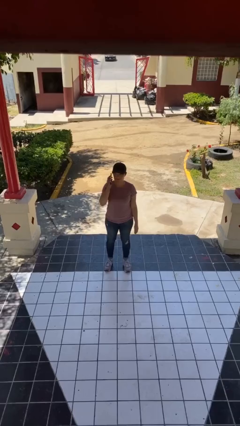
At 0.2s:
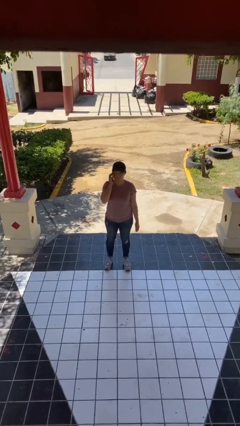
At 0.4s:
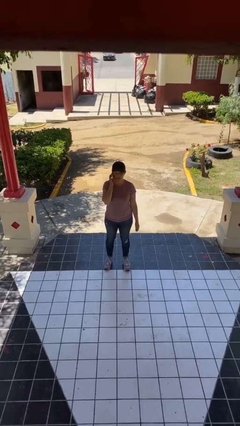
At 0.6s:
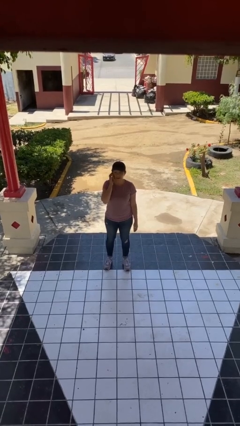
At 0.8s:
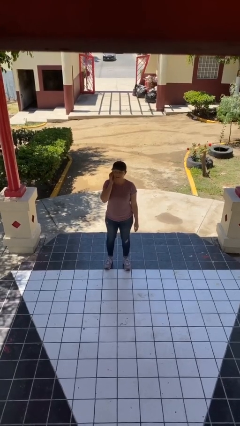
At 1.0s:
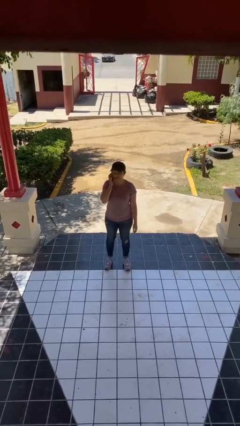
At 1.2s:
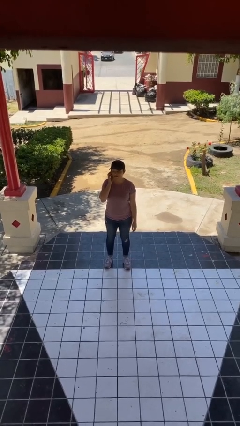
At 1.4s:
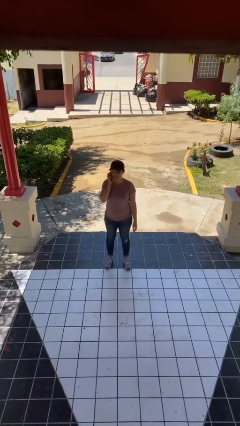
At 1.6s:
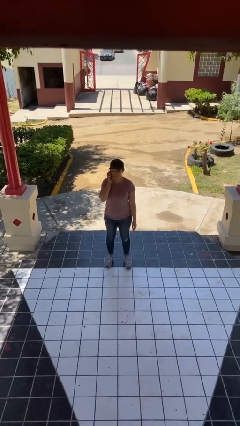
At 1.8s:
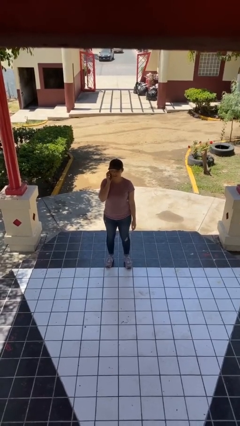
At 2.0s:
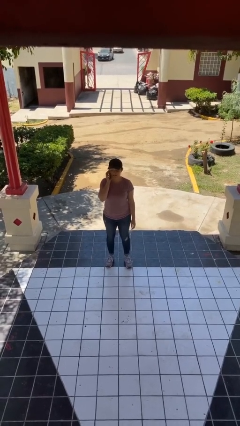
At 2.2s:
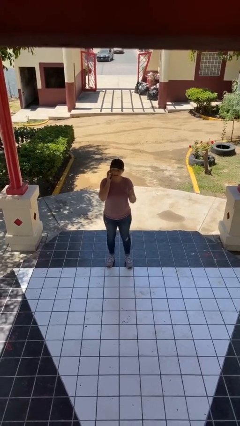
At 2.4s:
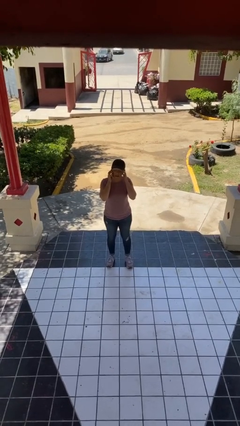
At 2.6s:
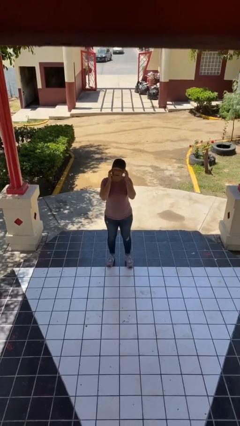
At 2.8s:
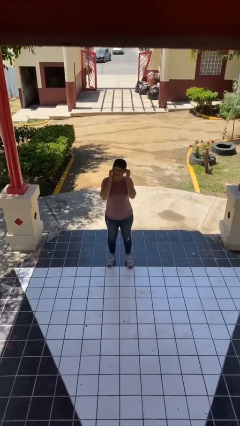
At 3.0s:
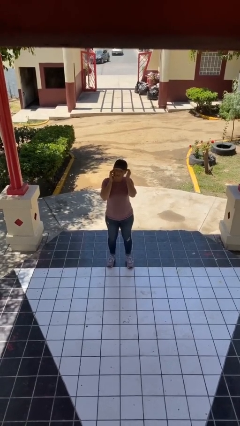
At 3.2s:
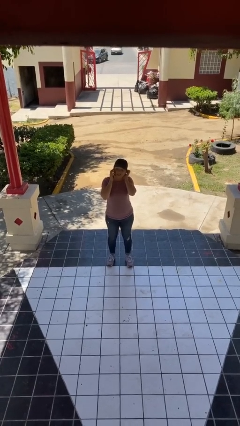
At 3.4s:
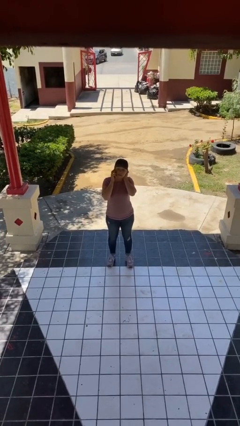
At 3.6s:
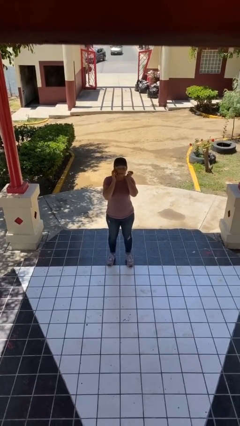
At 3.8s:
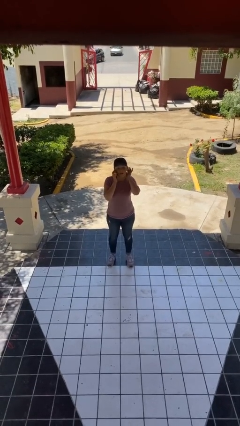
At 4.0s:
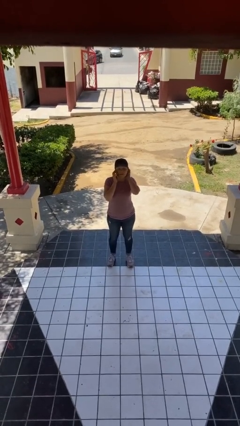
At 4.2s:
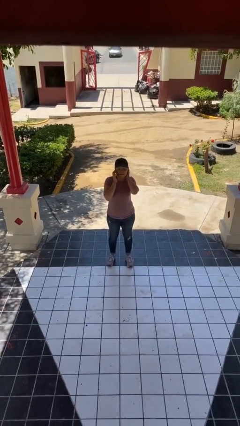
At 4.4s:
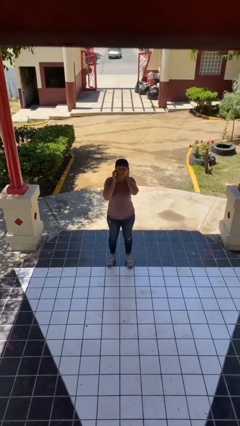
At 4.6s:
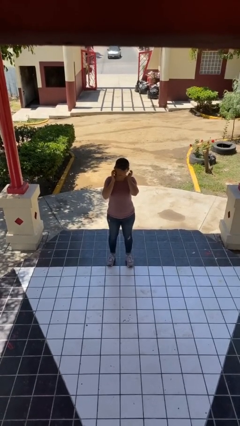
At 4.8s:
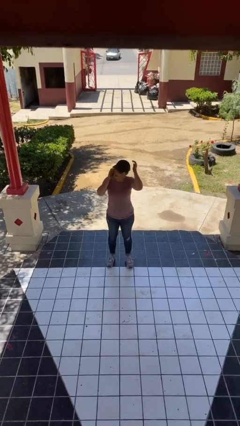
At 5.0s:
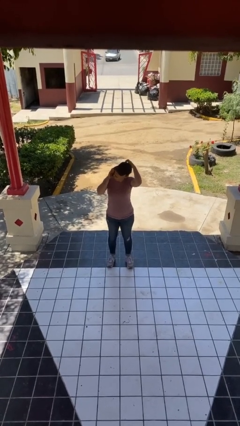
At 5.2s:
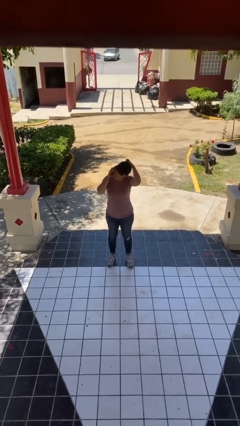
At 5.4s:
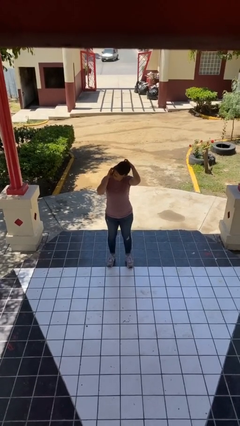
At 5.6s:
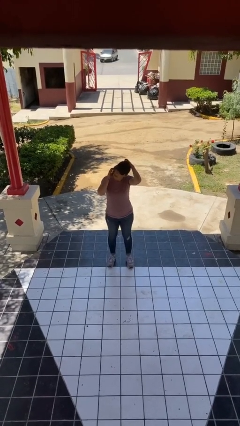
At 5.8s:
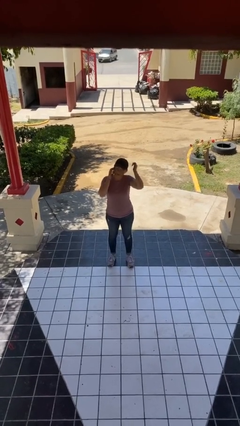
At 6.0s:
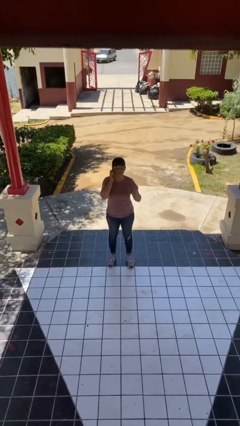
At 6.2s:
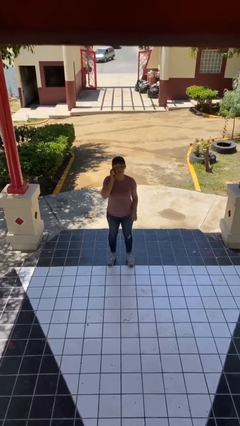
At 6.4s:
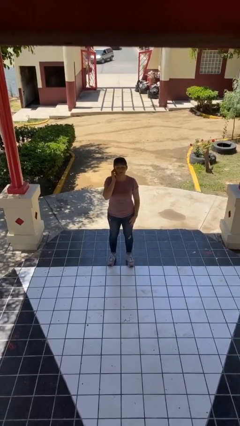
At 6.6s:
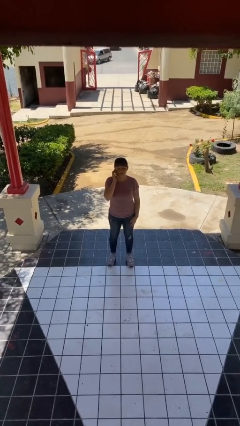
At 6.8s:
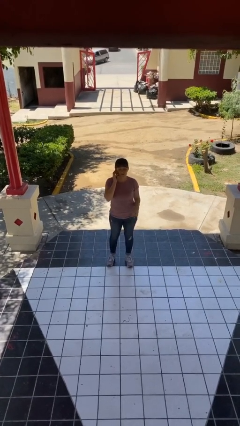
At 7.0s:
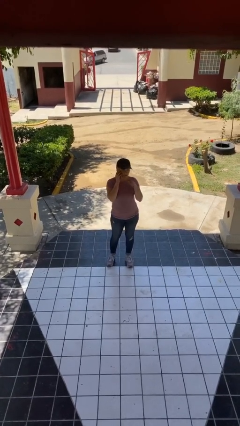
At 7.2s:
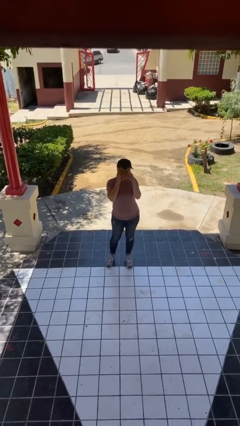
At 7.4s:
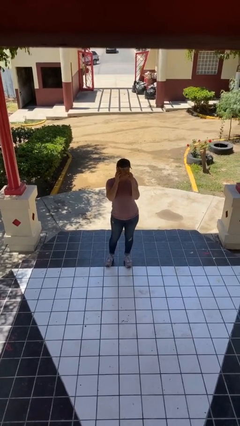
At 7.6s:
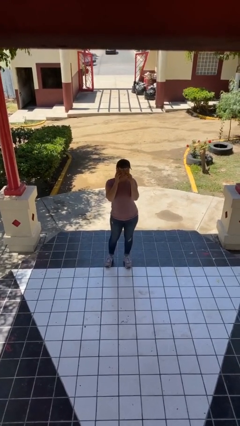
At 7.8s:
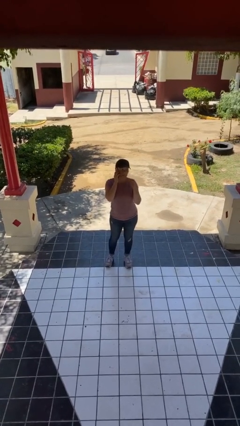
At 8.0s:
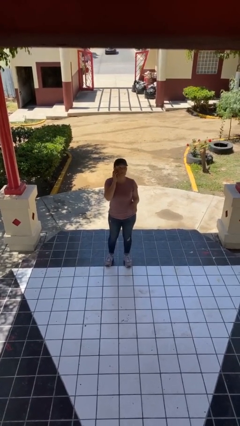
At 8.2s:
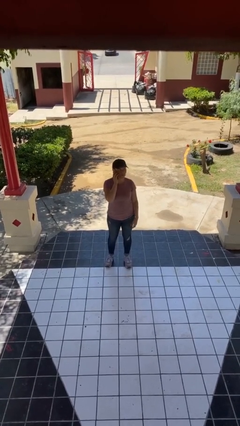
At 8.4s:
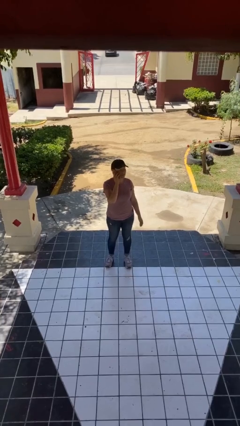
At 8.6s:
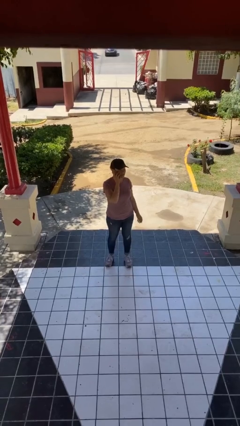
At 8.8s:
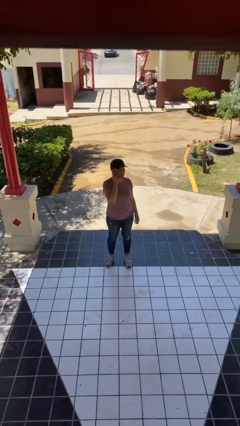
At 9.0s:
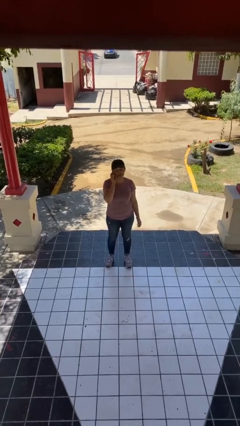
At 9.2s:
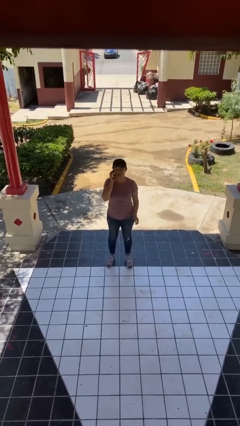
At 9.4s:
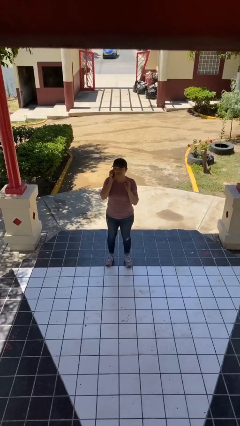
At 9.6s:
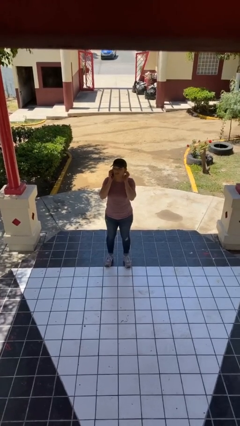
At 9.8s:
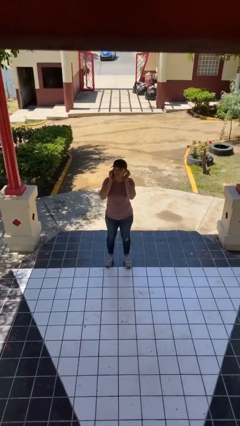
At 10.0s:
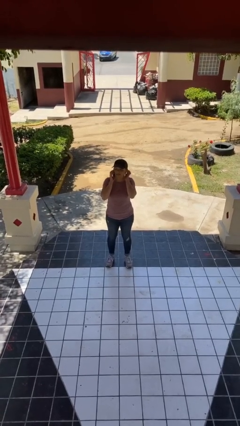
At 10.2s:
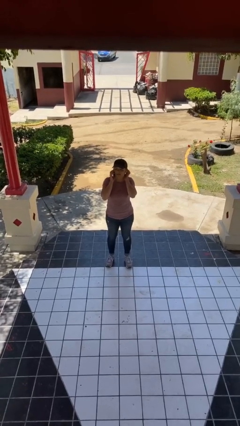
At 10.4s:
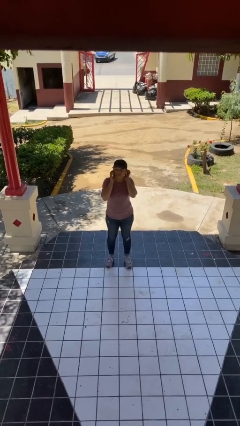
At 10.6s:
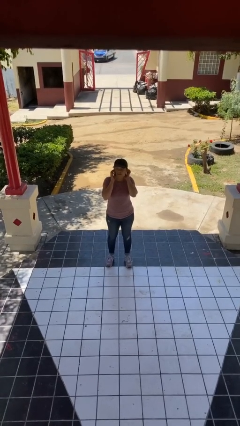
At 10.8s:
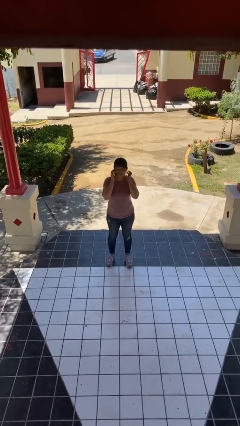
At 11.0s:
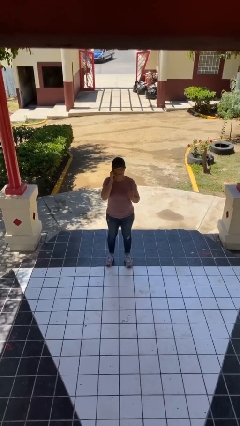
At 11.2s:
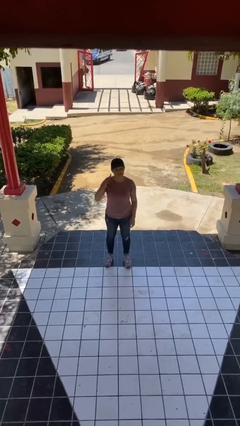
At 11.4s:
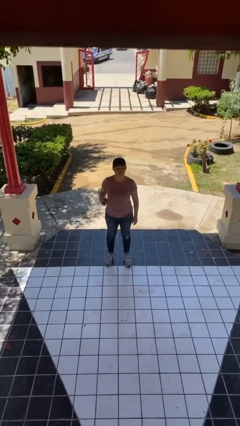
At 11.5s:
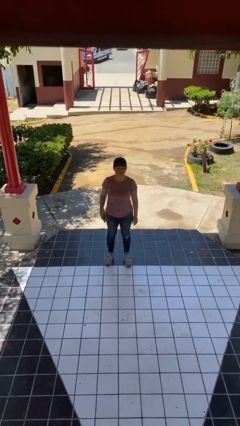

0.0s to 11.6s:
person talks on phone

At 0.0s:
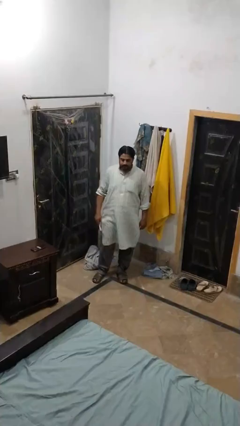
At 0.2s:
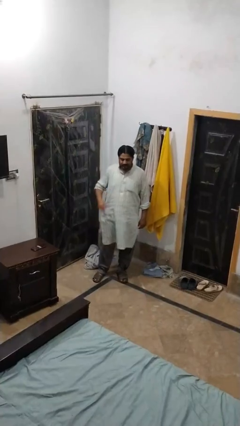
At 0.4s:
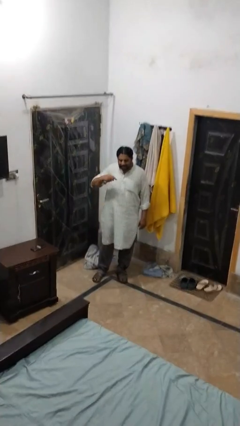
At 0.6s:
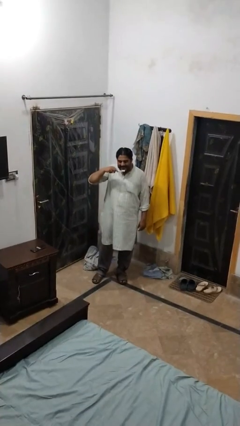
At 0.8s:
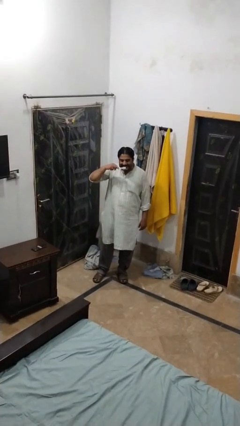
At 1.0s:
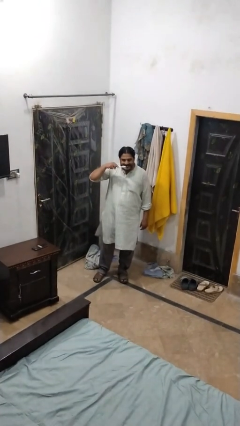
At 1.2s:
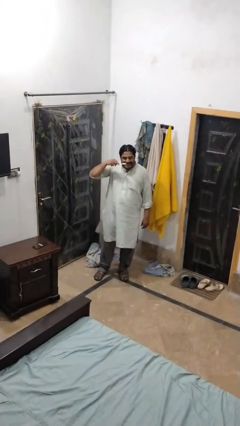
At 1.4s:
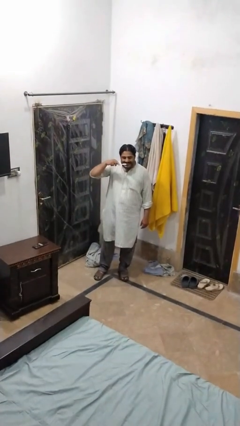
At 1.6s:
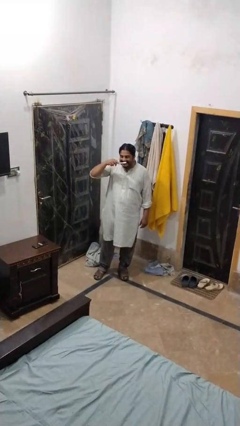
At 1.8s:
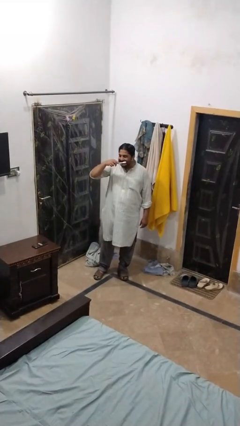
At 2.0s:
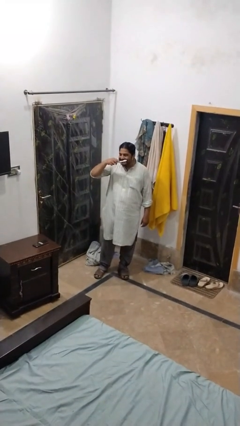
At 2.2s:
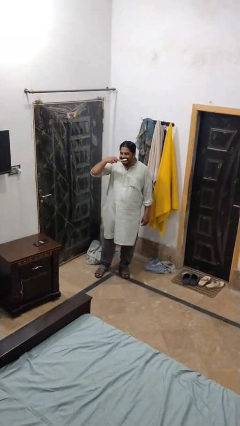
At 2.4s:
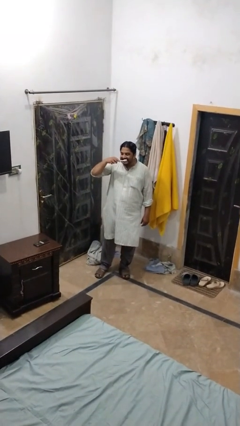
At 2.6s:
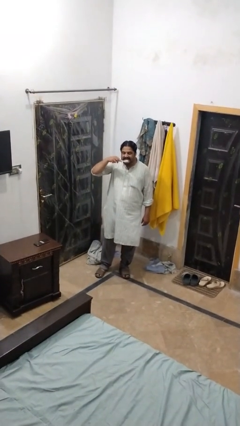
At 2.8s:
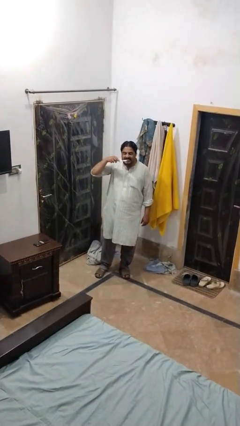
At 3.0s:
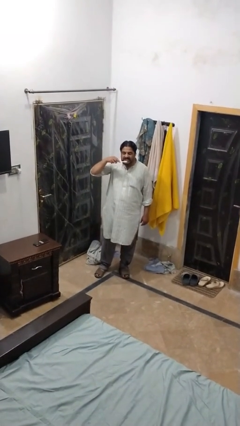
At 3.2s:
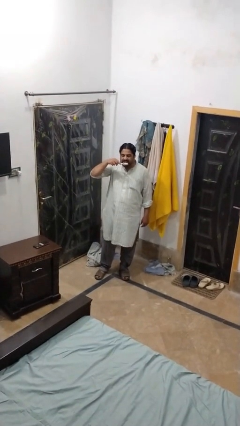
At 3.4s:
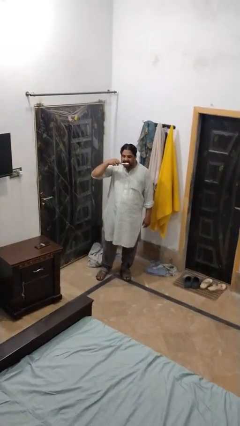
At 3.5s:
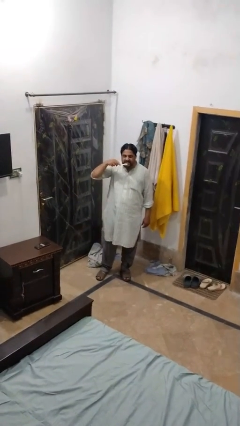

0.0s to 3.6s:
person brushes teeth

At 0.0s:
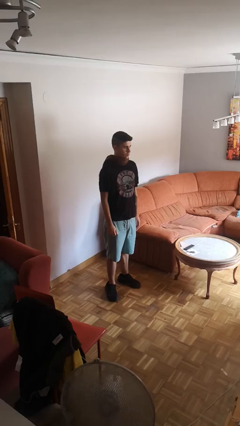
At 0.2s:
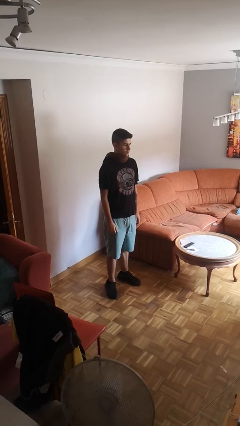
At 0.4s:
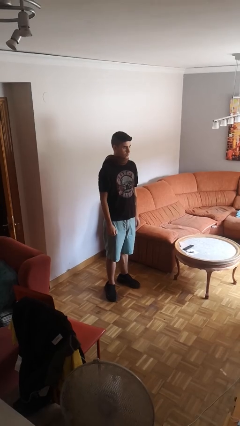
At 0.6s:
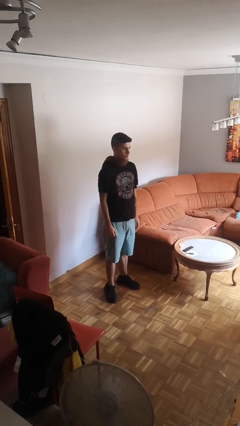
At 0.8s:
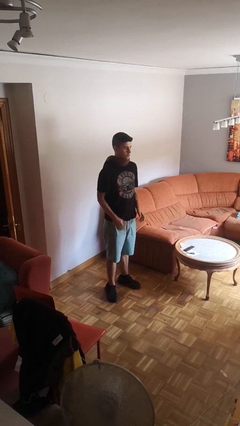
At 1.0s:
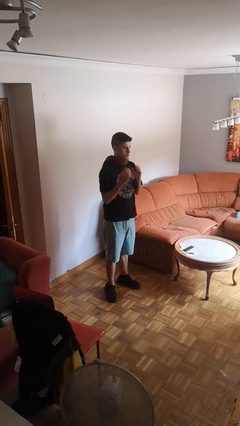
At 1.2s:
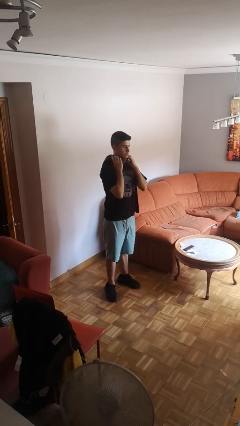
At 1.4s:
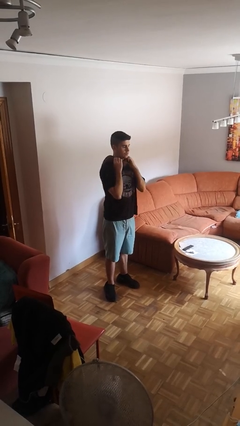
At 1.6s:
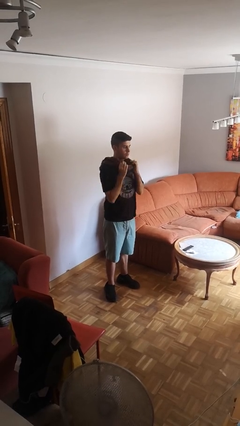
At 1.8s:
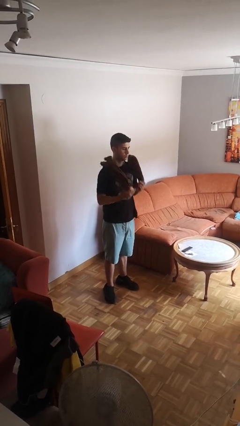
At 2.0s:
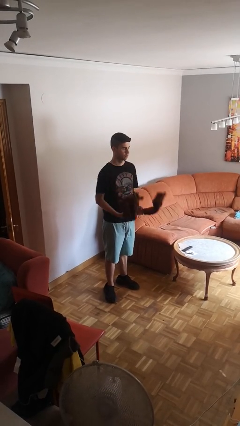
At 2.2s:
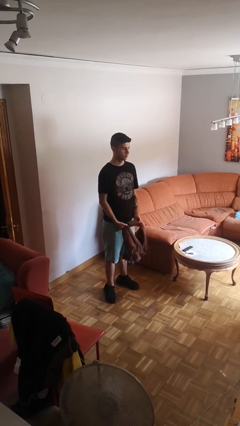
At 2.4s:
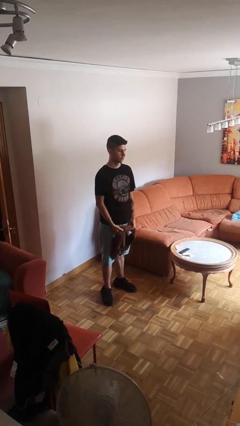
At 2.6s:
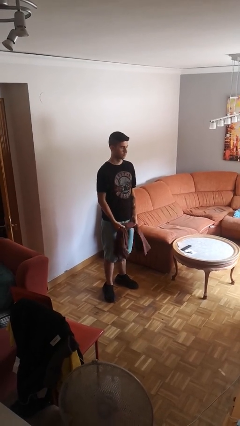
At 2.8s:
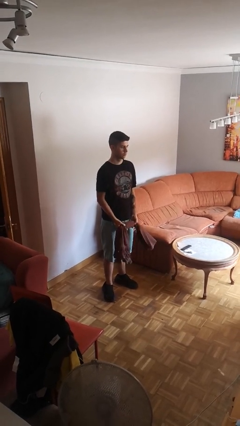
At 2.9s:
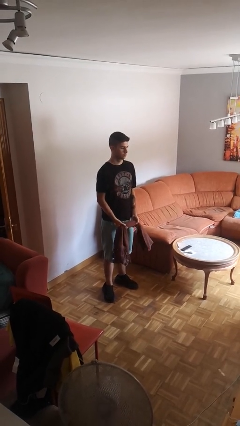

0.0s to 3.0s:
person takes off scarf

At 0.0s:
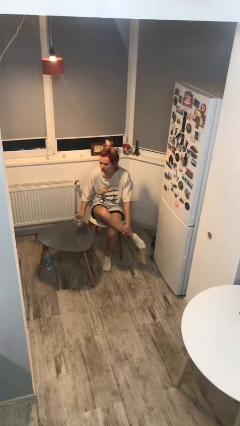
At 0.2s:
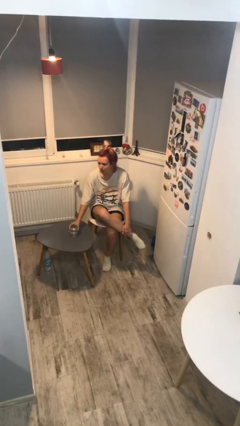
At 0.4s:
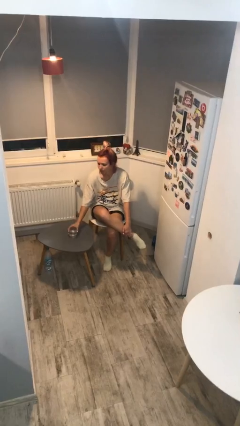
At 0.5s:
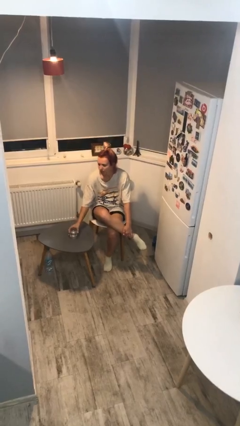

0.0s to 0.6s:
person puts down object on table
